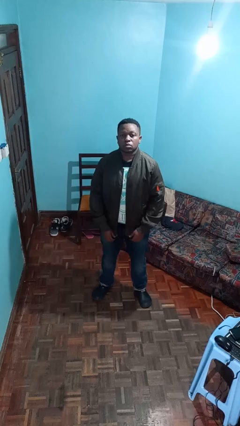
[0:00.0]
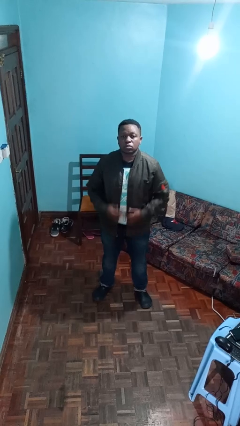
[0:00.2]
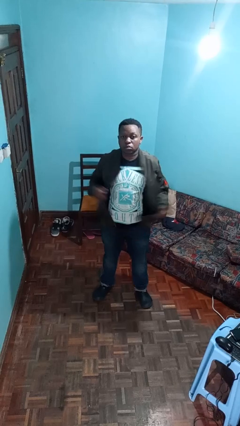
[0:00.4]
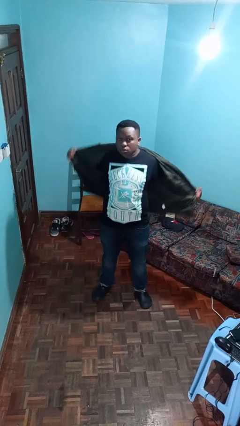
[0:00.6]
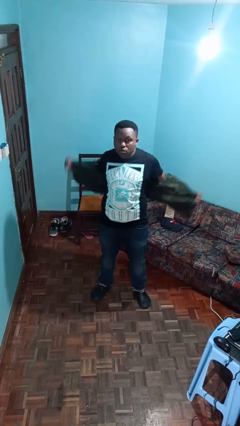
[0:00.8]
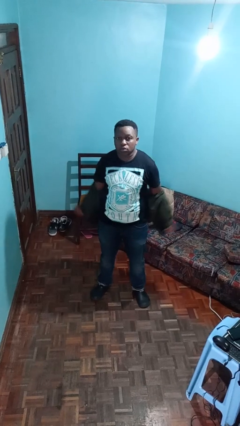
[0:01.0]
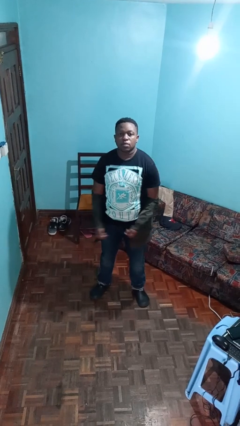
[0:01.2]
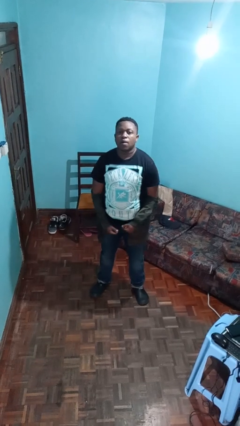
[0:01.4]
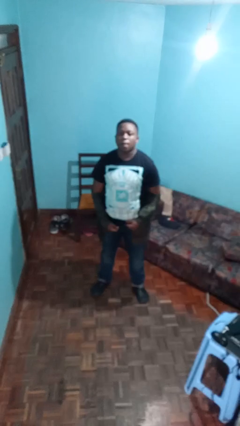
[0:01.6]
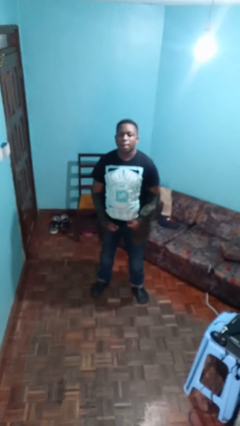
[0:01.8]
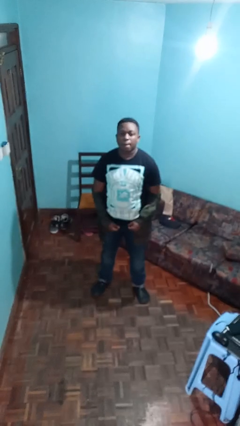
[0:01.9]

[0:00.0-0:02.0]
person takes off jacket

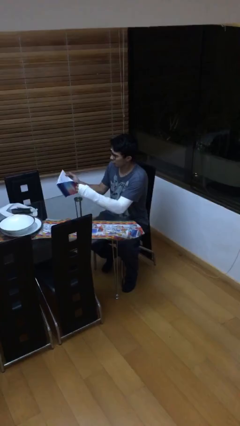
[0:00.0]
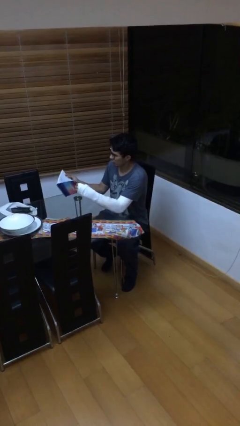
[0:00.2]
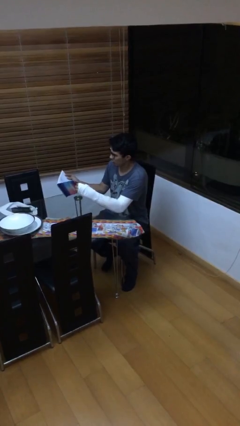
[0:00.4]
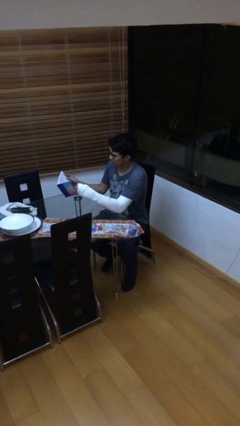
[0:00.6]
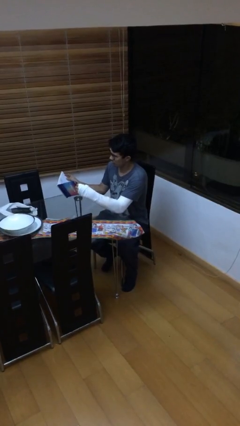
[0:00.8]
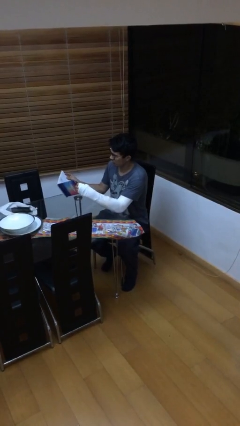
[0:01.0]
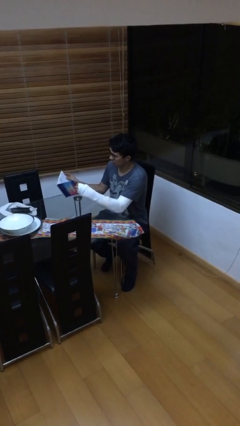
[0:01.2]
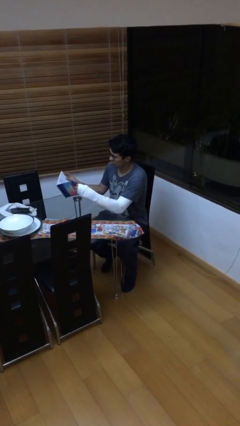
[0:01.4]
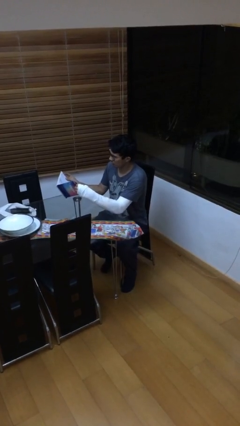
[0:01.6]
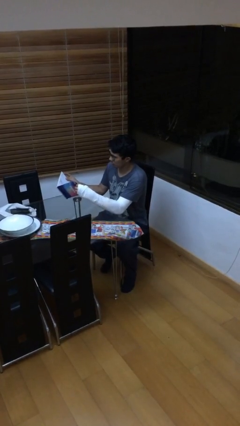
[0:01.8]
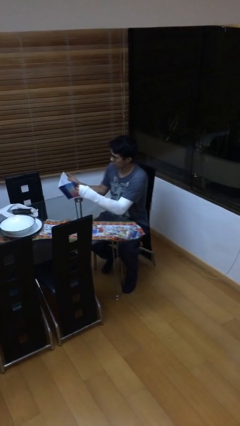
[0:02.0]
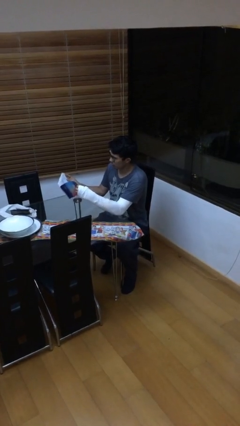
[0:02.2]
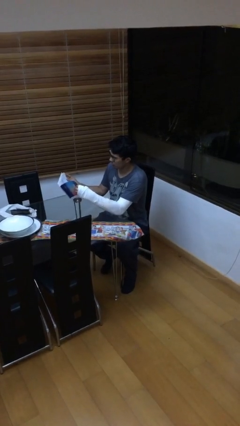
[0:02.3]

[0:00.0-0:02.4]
person reads document

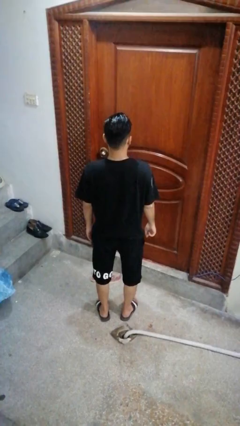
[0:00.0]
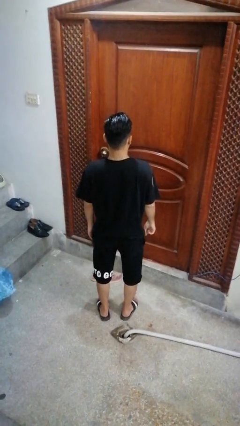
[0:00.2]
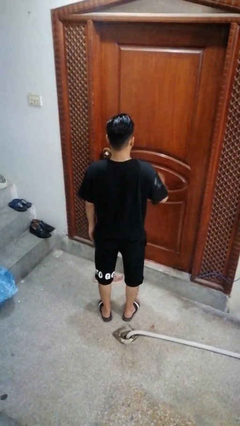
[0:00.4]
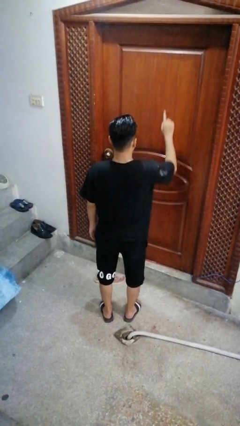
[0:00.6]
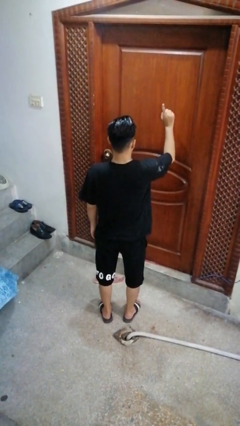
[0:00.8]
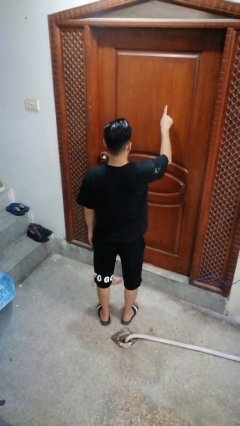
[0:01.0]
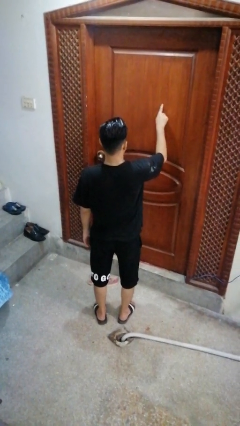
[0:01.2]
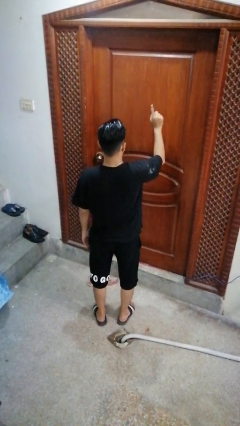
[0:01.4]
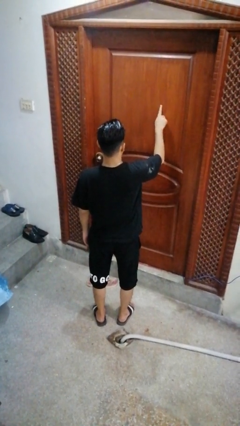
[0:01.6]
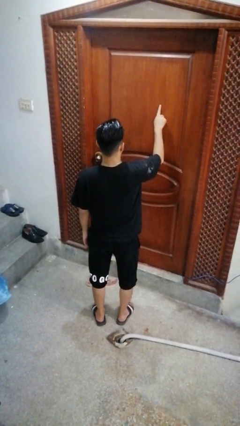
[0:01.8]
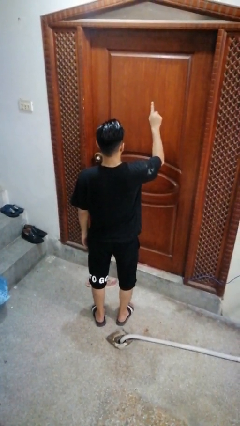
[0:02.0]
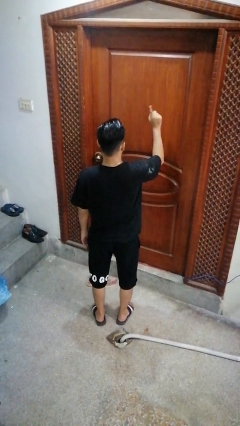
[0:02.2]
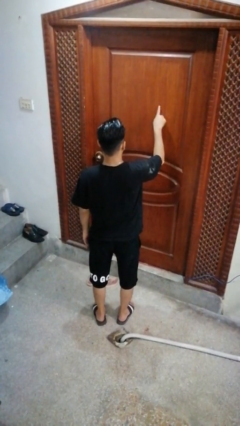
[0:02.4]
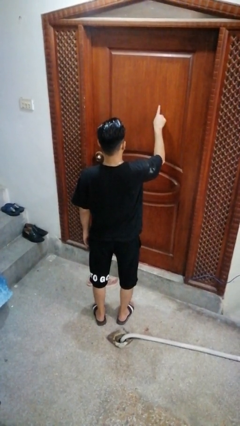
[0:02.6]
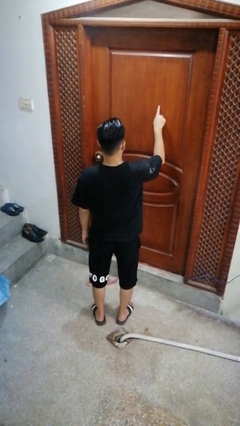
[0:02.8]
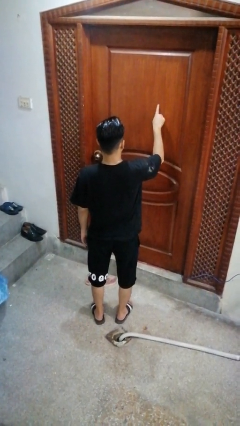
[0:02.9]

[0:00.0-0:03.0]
person taps object with finger

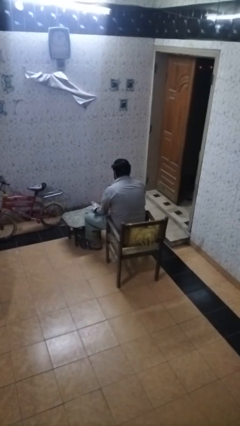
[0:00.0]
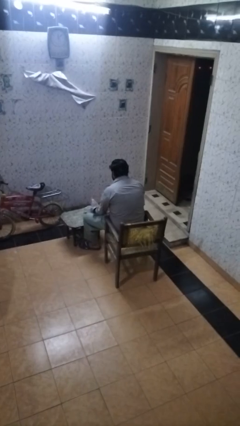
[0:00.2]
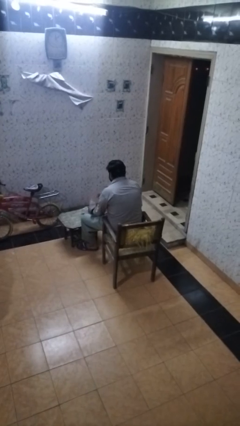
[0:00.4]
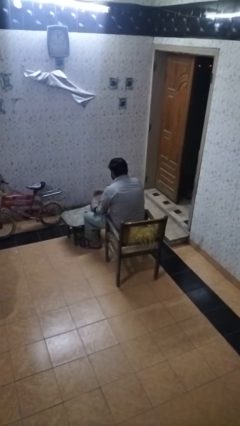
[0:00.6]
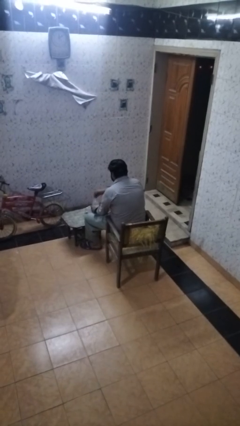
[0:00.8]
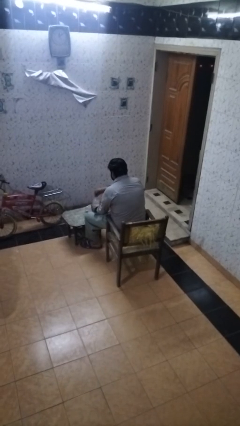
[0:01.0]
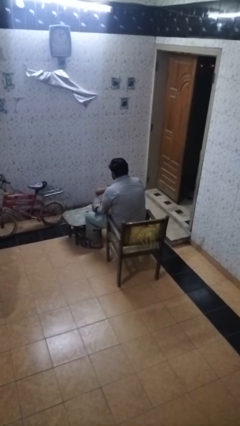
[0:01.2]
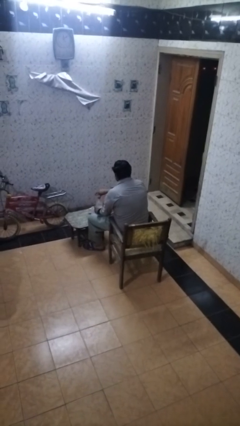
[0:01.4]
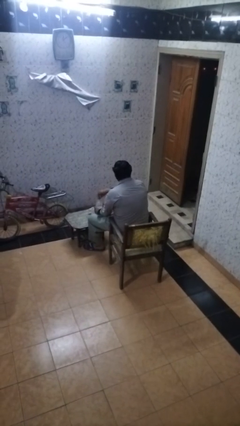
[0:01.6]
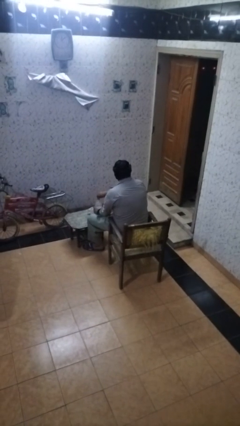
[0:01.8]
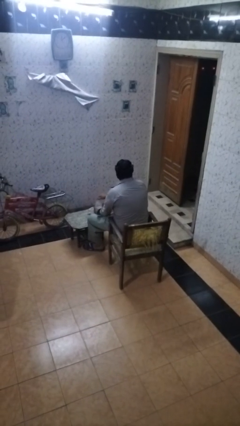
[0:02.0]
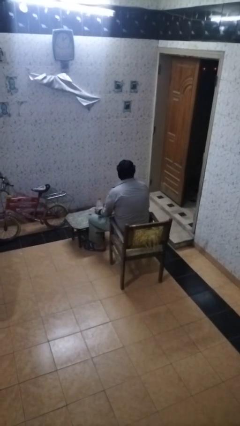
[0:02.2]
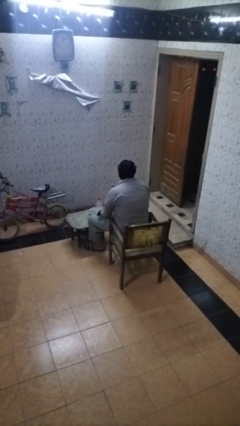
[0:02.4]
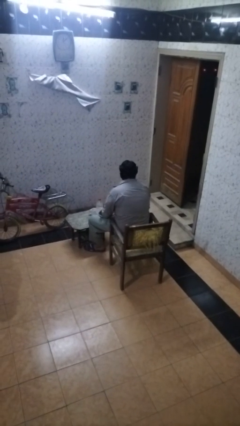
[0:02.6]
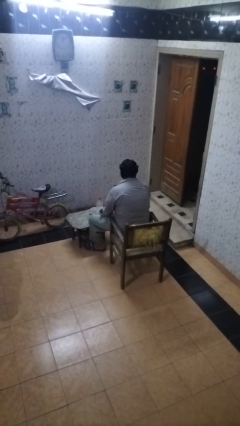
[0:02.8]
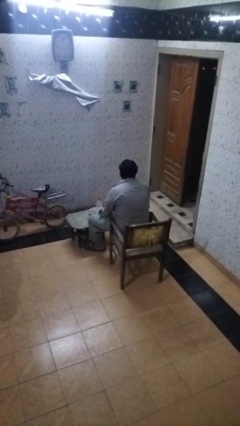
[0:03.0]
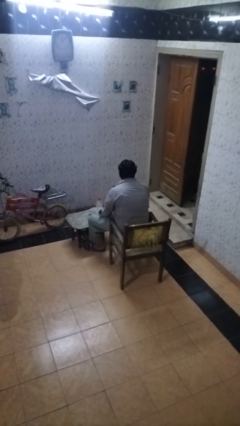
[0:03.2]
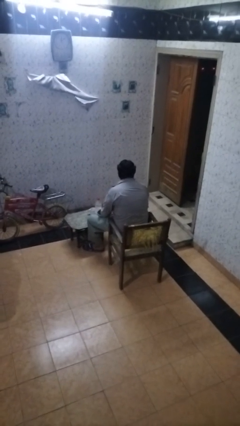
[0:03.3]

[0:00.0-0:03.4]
person screws lid to bottle

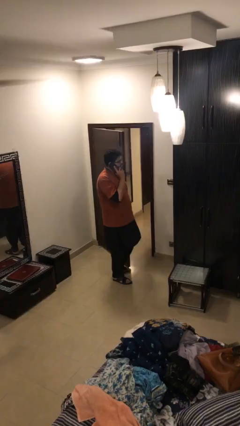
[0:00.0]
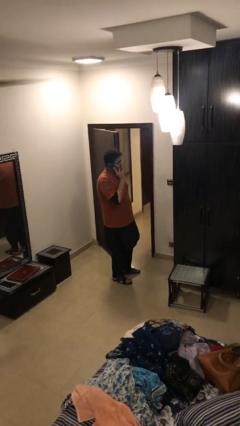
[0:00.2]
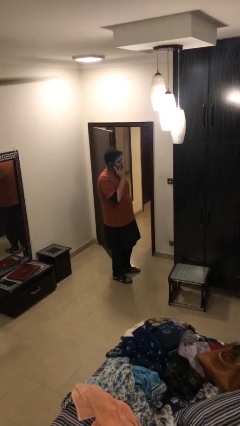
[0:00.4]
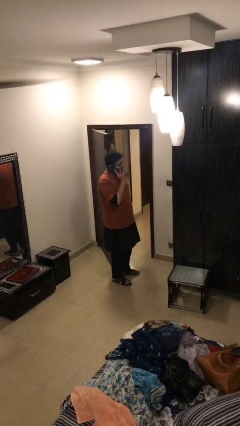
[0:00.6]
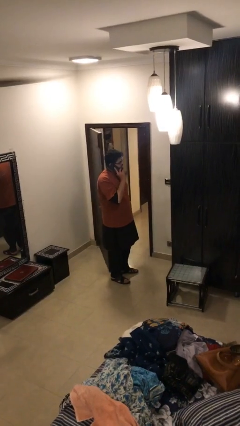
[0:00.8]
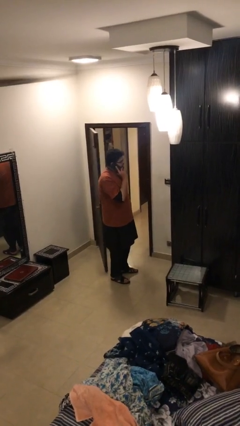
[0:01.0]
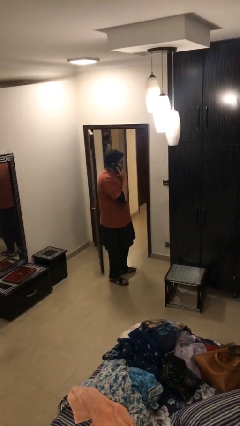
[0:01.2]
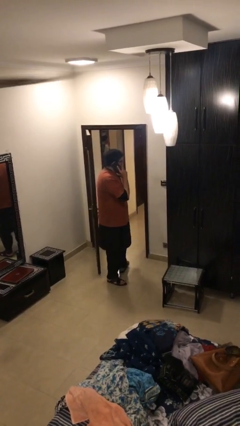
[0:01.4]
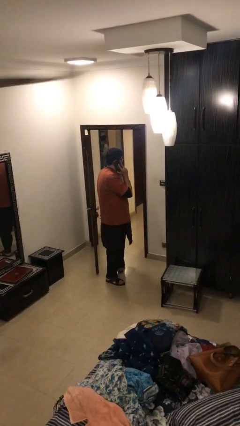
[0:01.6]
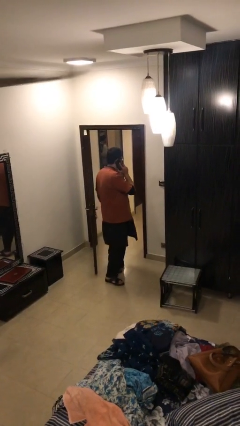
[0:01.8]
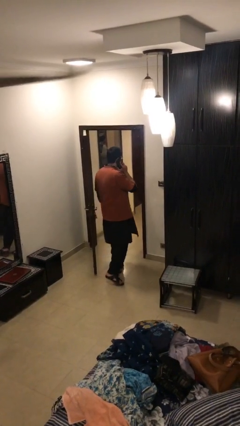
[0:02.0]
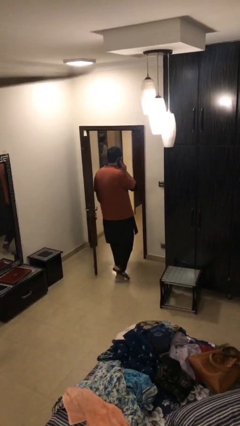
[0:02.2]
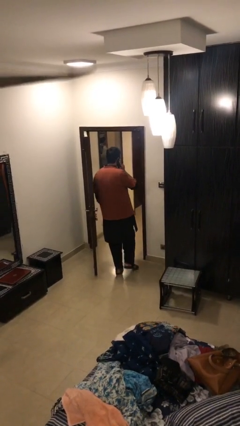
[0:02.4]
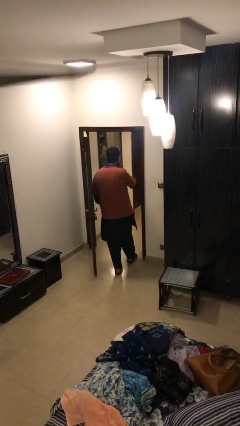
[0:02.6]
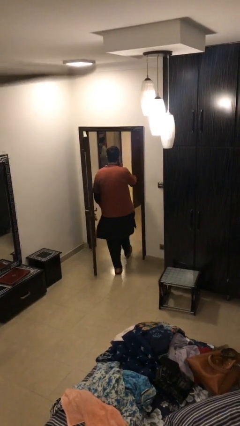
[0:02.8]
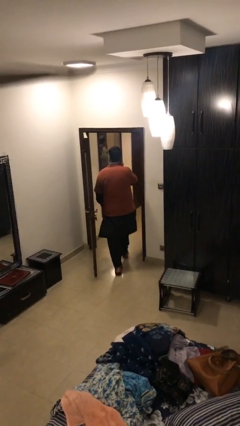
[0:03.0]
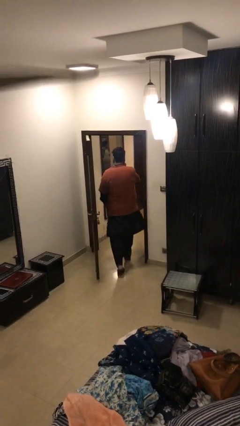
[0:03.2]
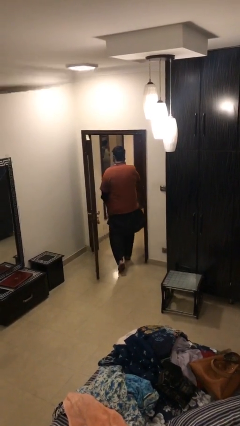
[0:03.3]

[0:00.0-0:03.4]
person exits scene through structure

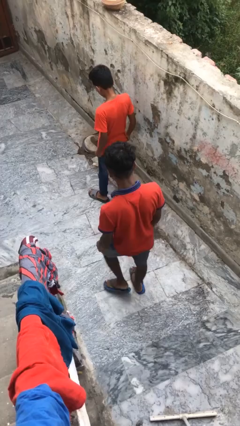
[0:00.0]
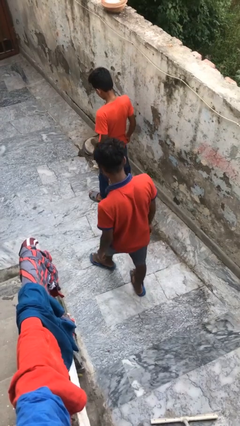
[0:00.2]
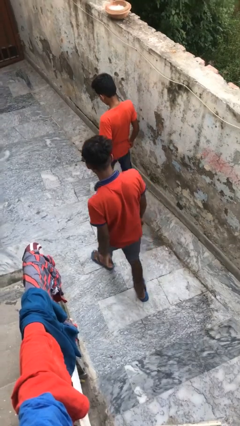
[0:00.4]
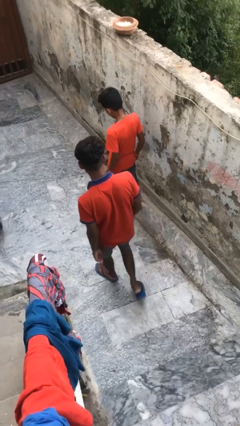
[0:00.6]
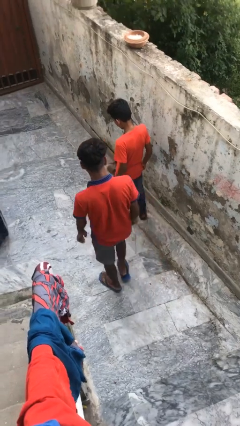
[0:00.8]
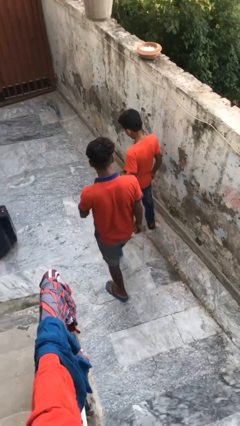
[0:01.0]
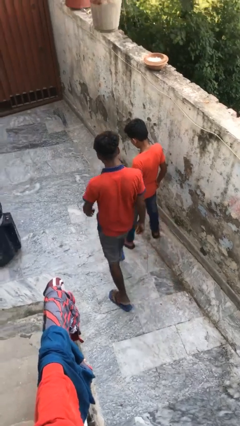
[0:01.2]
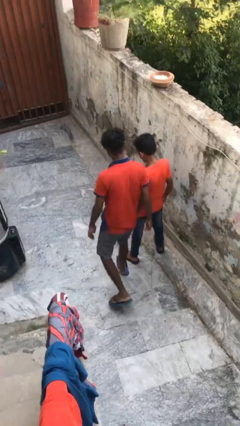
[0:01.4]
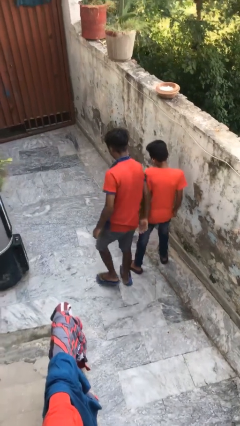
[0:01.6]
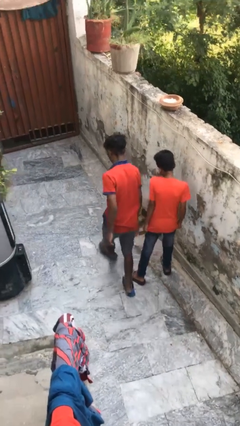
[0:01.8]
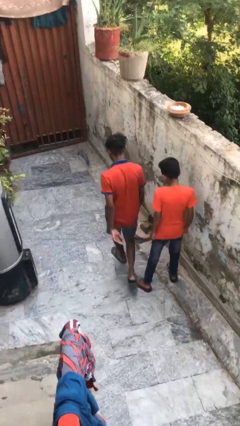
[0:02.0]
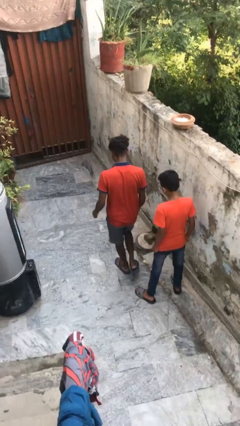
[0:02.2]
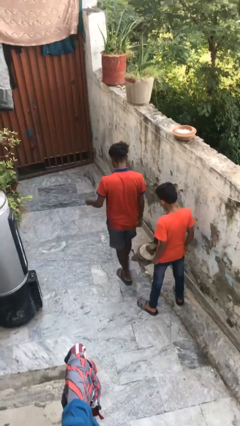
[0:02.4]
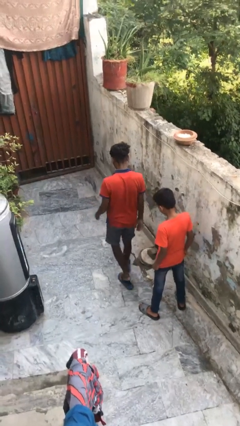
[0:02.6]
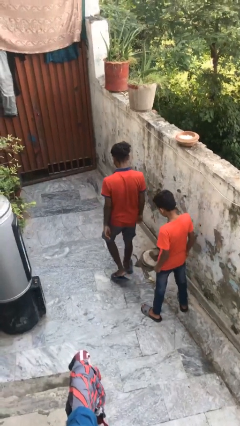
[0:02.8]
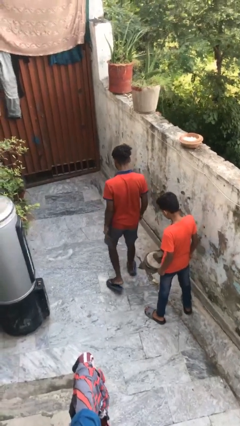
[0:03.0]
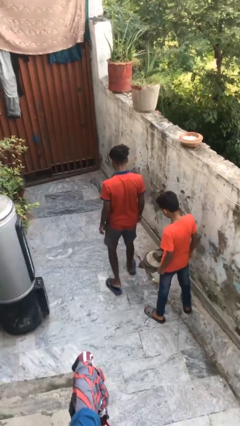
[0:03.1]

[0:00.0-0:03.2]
person bumps into person
